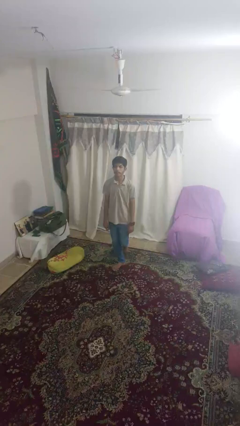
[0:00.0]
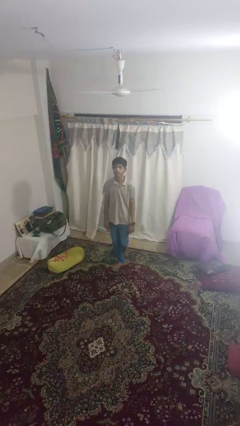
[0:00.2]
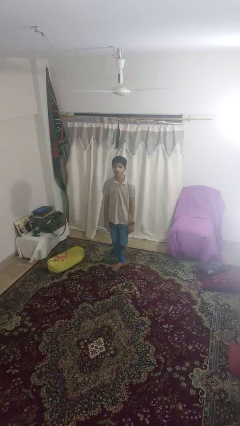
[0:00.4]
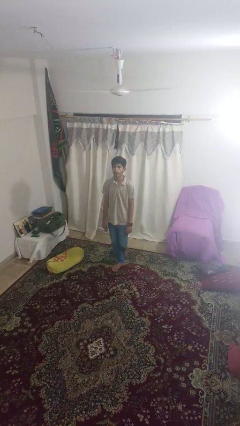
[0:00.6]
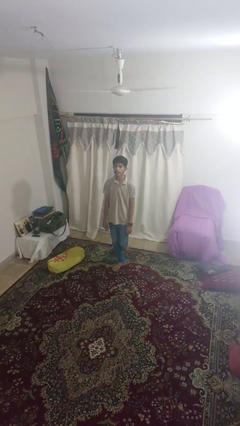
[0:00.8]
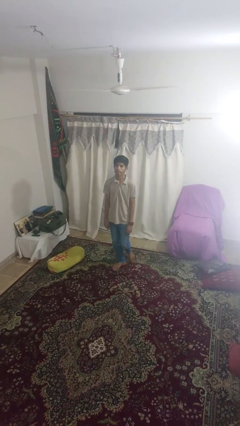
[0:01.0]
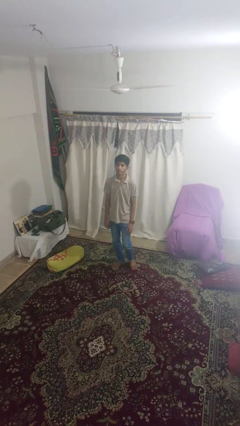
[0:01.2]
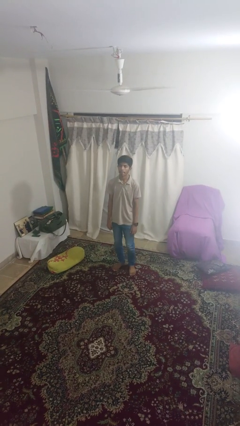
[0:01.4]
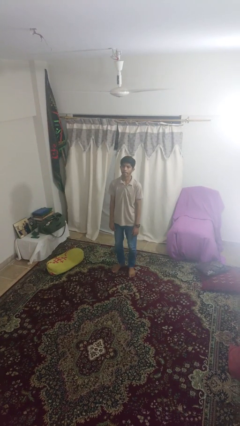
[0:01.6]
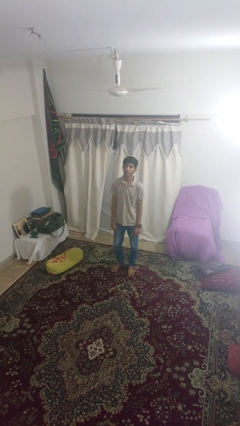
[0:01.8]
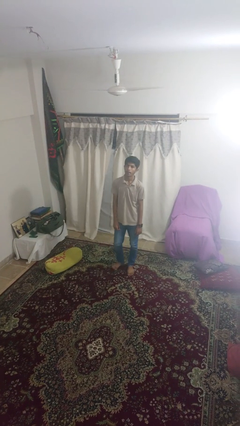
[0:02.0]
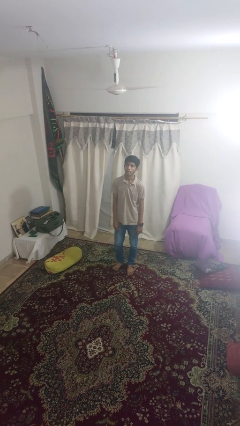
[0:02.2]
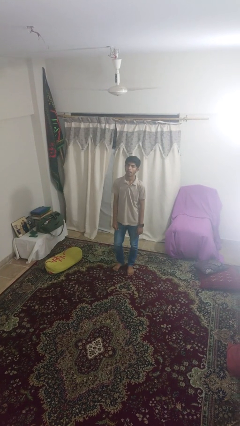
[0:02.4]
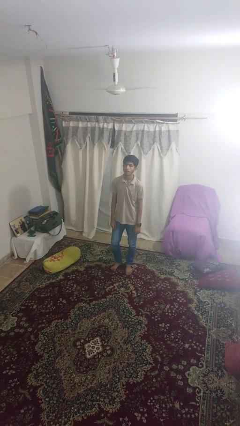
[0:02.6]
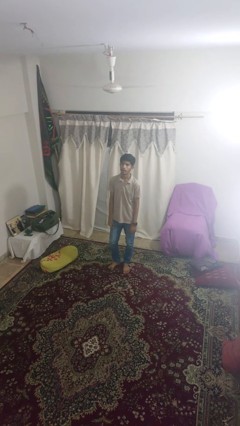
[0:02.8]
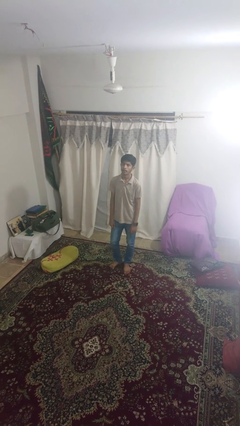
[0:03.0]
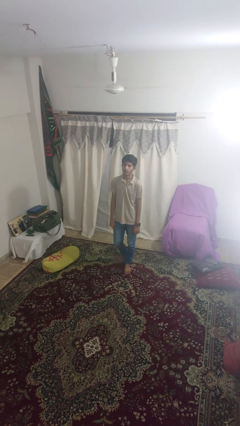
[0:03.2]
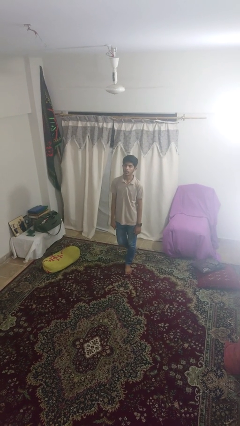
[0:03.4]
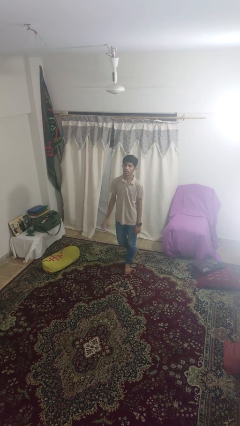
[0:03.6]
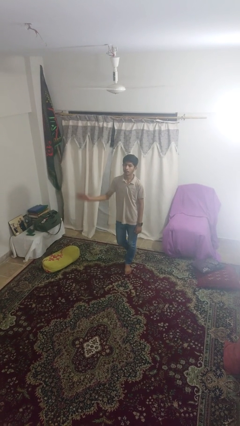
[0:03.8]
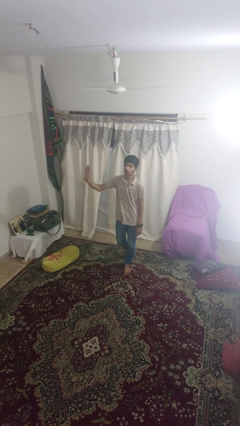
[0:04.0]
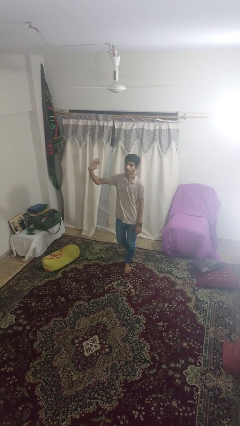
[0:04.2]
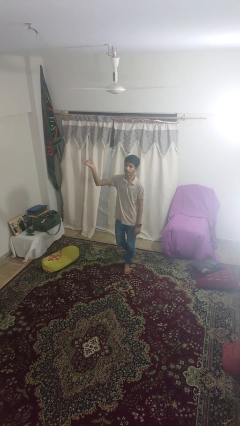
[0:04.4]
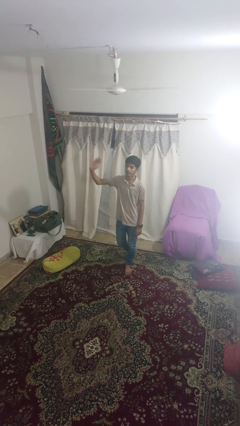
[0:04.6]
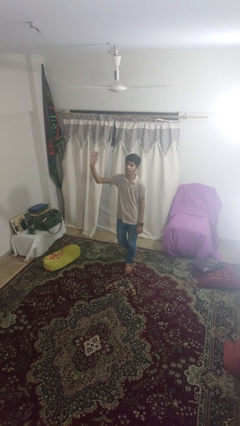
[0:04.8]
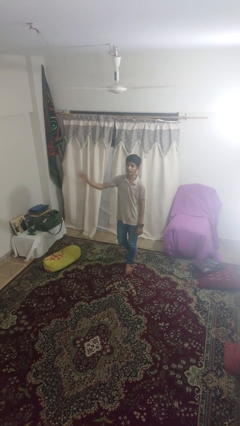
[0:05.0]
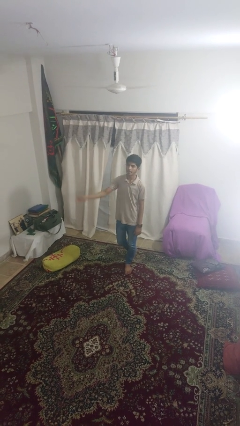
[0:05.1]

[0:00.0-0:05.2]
person waves at person

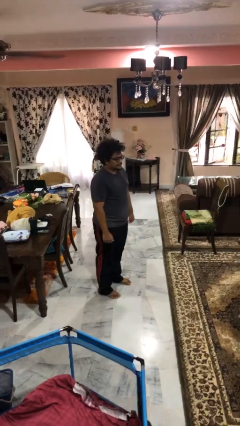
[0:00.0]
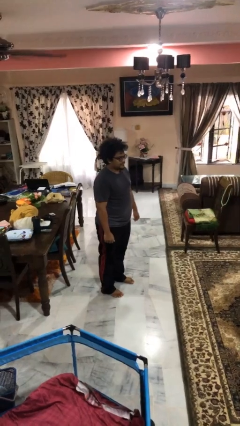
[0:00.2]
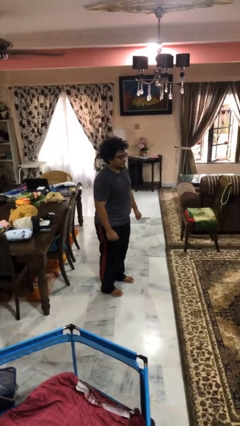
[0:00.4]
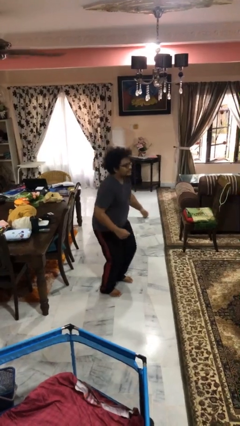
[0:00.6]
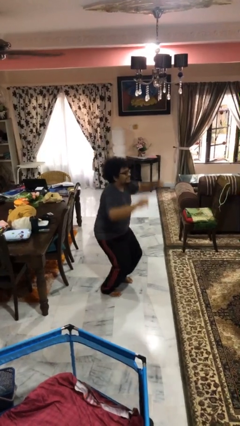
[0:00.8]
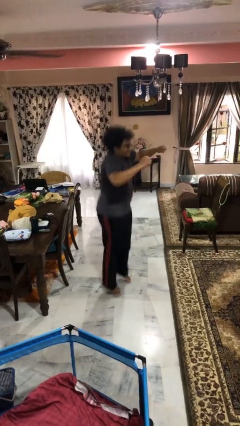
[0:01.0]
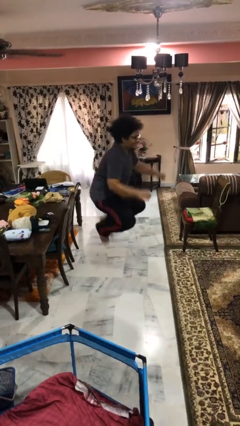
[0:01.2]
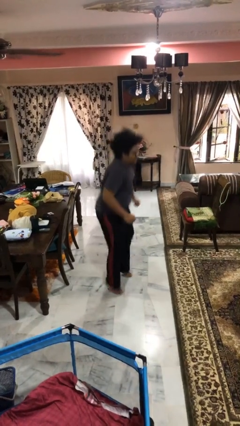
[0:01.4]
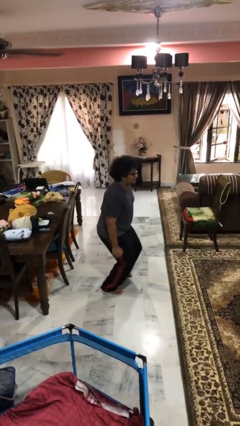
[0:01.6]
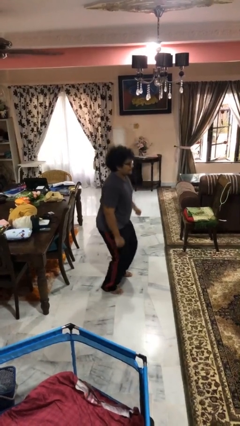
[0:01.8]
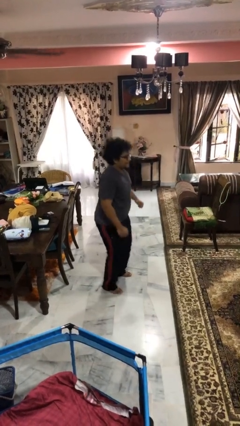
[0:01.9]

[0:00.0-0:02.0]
person jumps

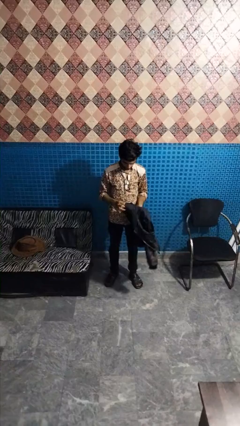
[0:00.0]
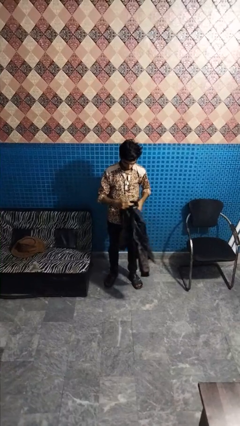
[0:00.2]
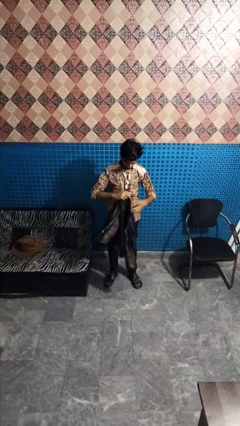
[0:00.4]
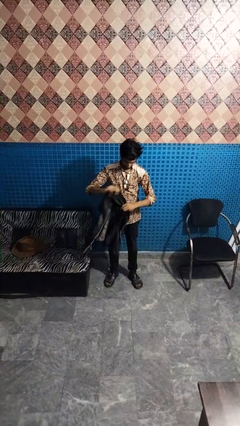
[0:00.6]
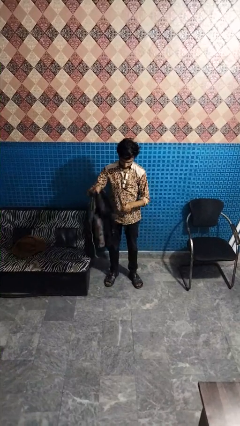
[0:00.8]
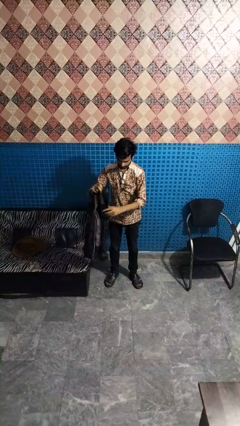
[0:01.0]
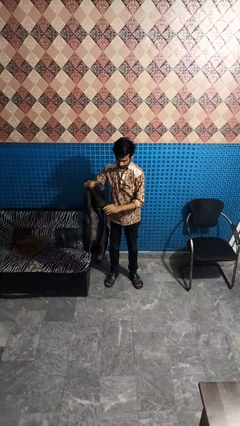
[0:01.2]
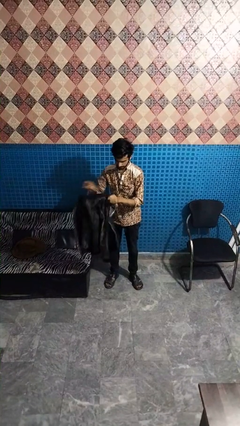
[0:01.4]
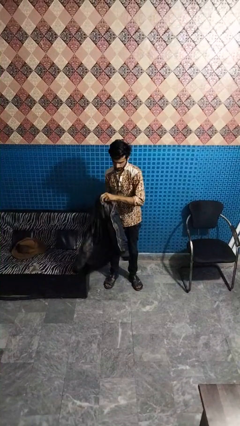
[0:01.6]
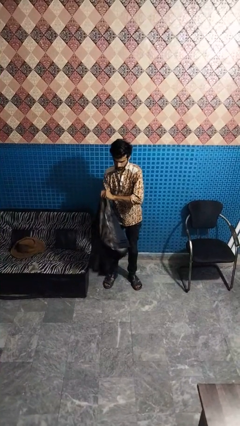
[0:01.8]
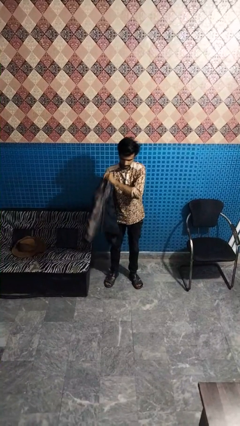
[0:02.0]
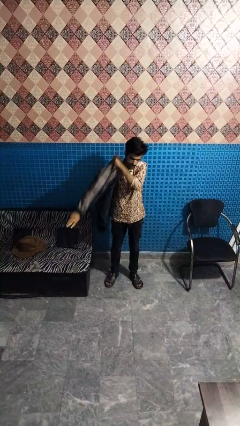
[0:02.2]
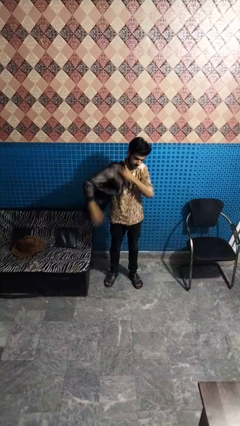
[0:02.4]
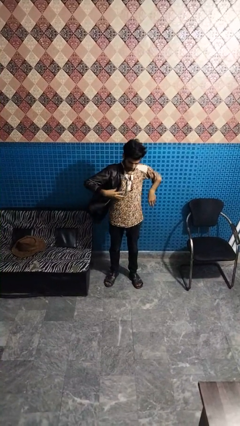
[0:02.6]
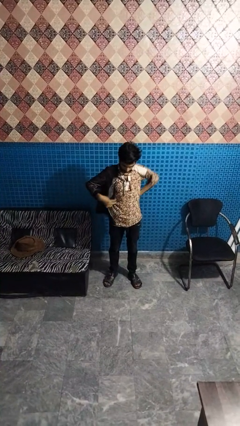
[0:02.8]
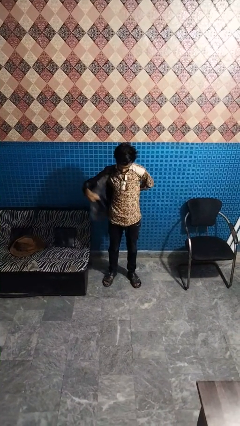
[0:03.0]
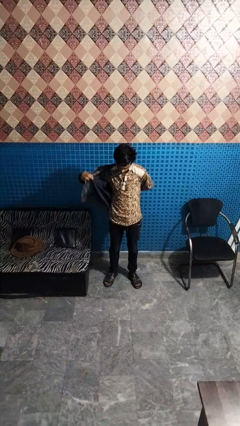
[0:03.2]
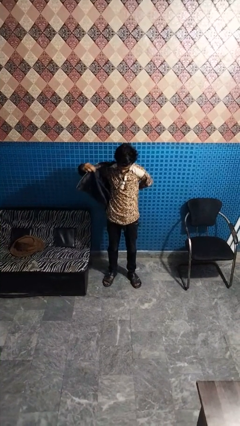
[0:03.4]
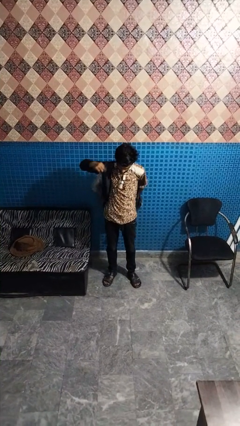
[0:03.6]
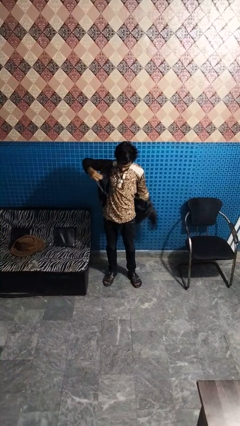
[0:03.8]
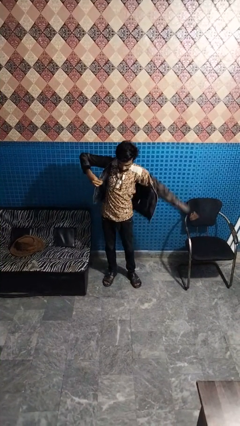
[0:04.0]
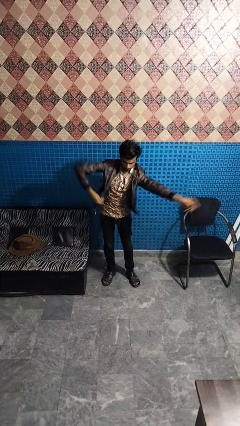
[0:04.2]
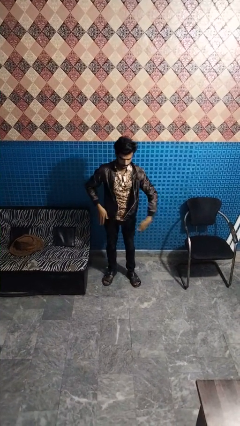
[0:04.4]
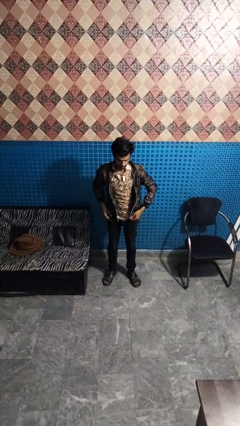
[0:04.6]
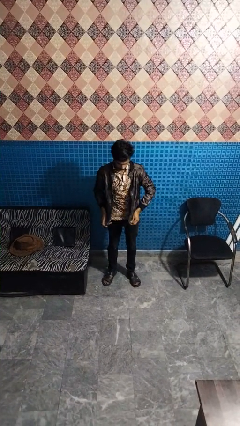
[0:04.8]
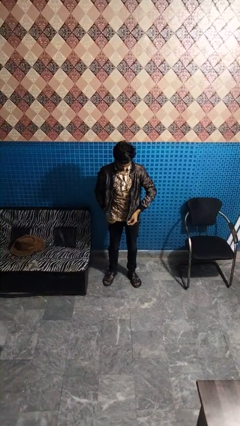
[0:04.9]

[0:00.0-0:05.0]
person puts on jacket

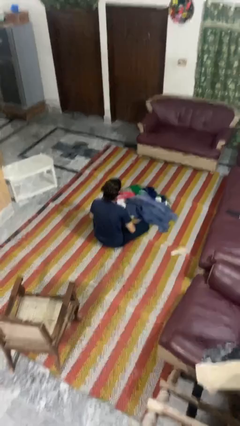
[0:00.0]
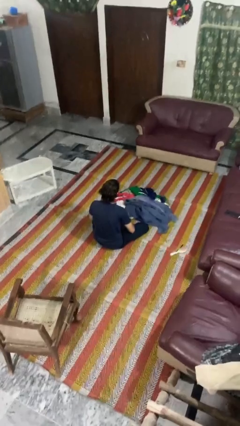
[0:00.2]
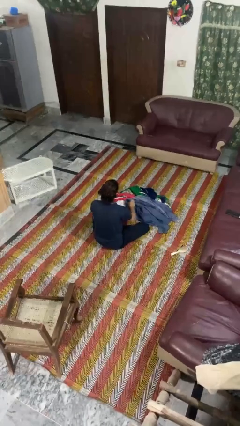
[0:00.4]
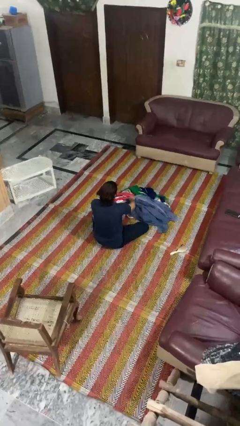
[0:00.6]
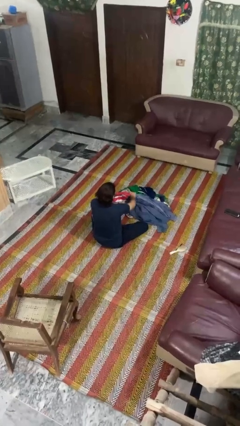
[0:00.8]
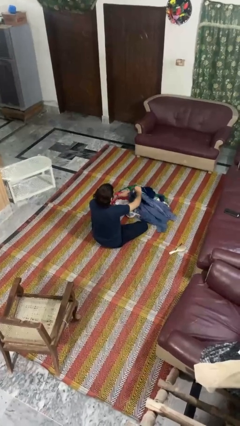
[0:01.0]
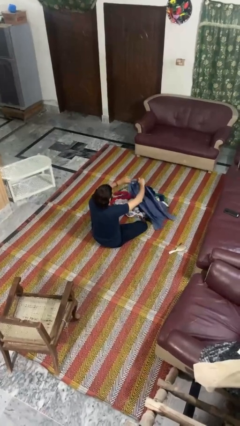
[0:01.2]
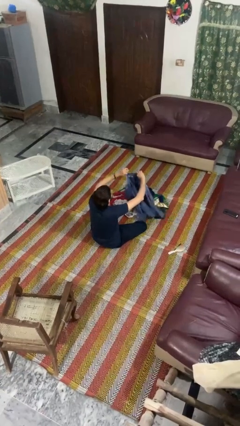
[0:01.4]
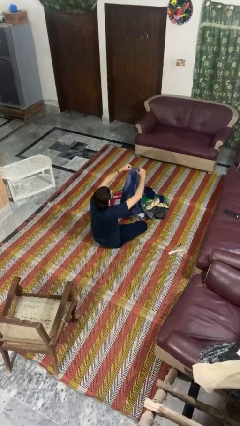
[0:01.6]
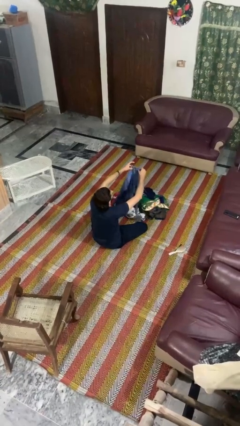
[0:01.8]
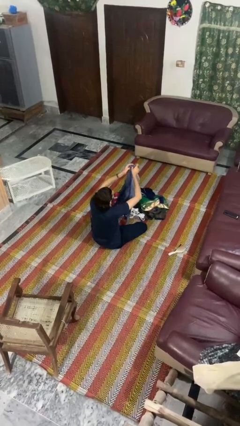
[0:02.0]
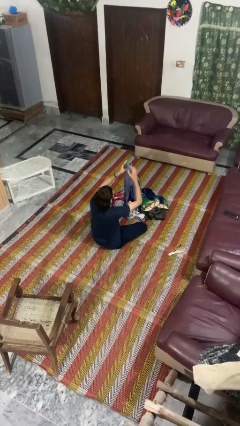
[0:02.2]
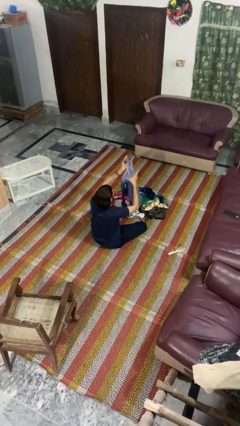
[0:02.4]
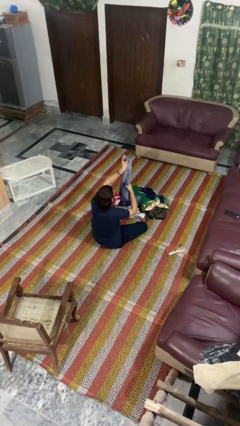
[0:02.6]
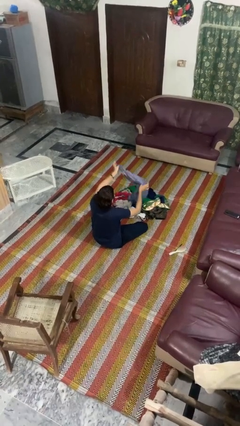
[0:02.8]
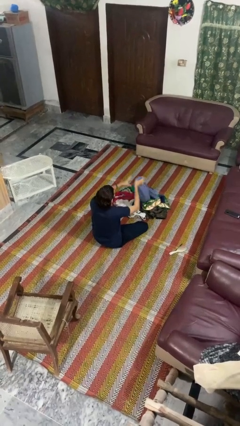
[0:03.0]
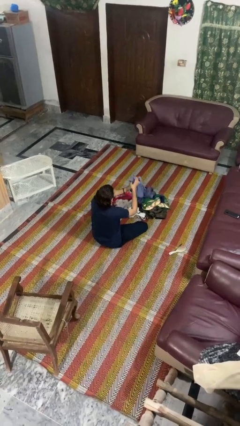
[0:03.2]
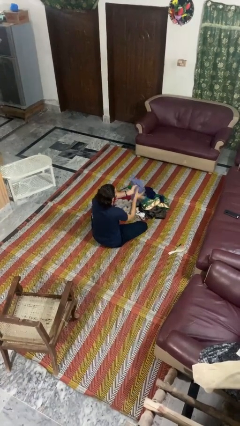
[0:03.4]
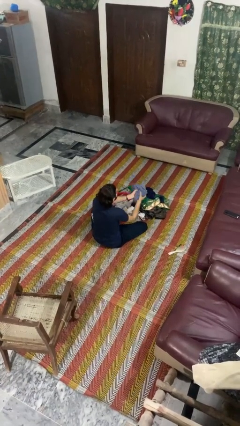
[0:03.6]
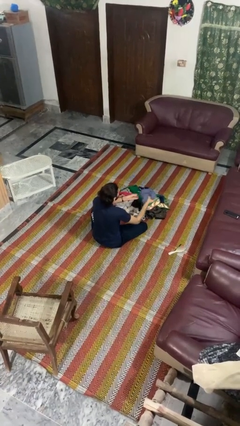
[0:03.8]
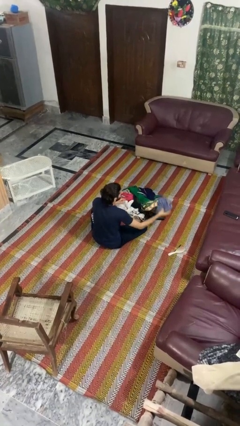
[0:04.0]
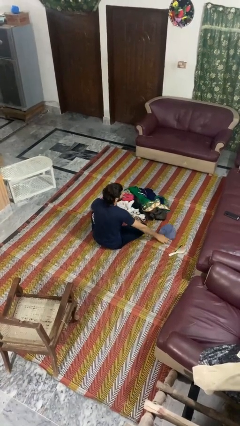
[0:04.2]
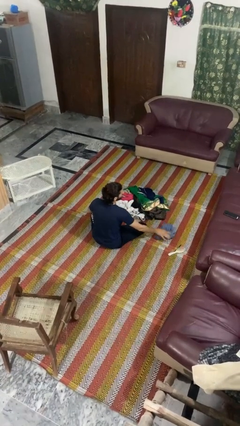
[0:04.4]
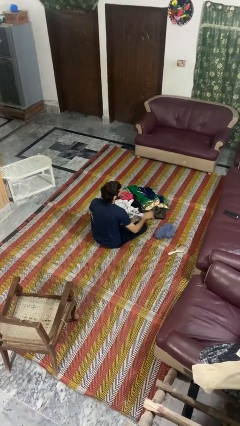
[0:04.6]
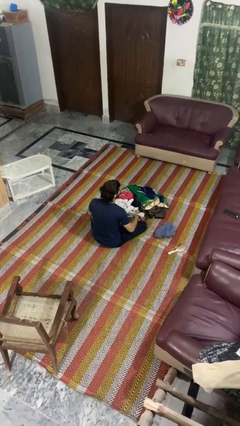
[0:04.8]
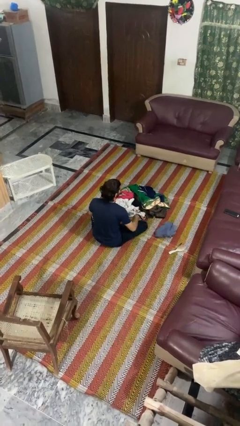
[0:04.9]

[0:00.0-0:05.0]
person folds pants

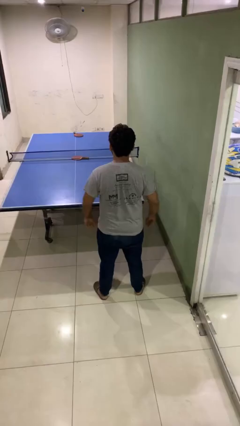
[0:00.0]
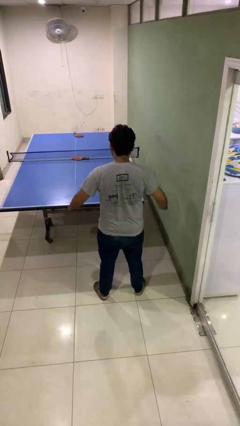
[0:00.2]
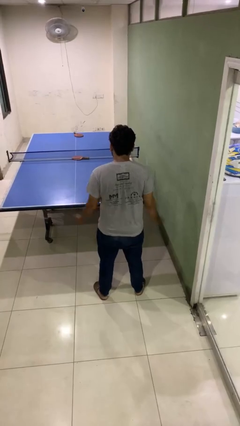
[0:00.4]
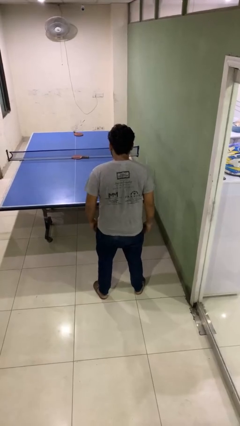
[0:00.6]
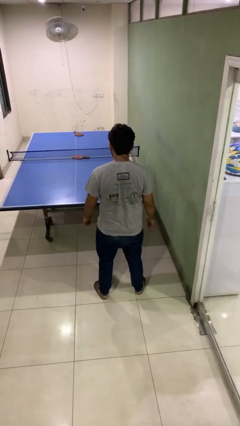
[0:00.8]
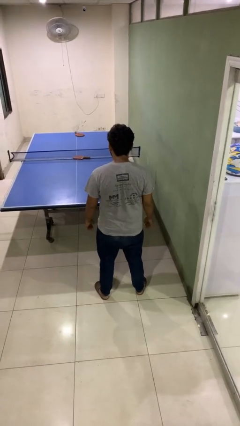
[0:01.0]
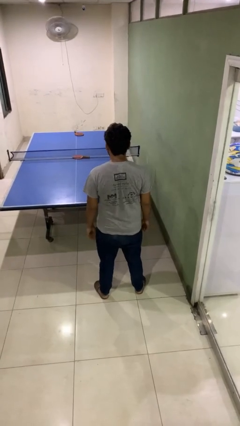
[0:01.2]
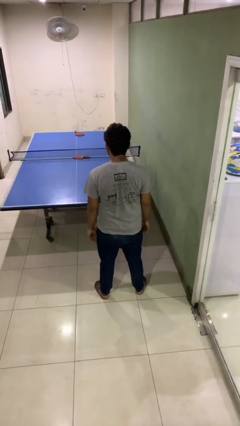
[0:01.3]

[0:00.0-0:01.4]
person slaps hands on thighs
